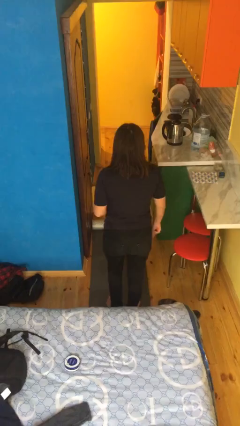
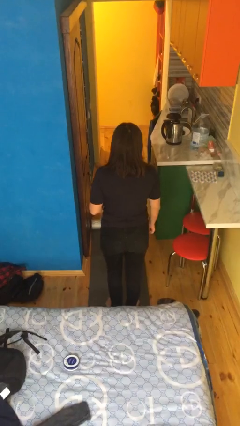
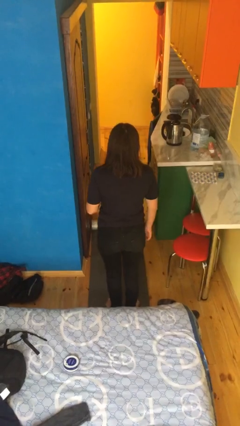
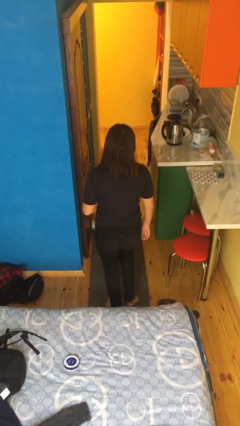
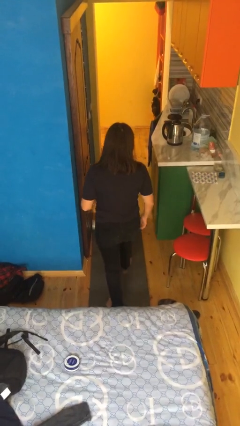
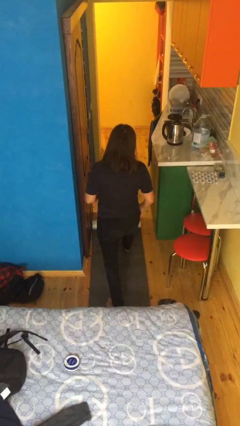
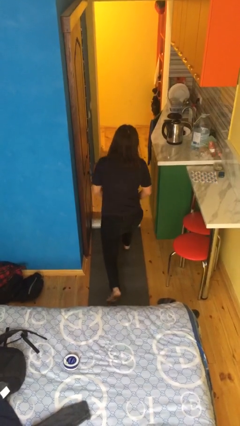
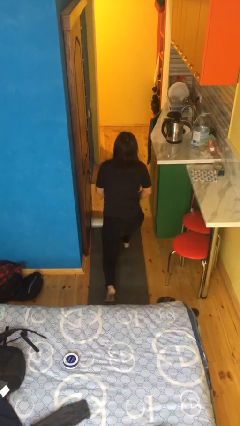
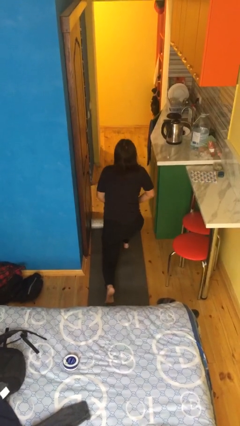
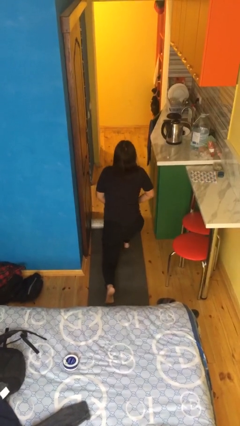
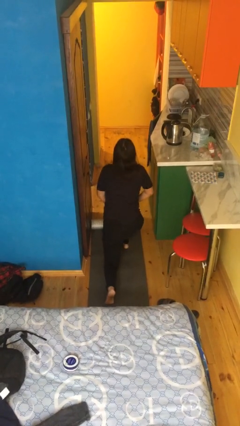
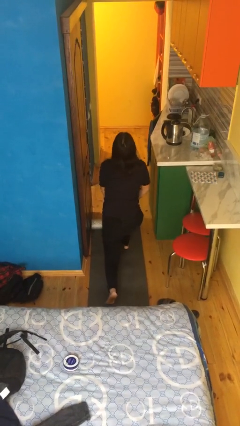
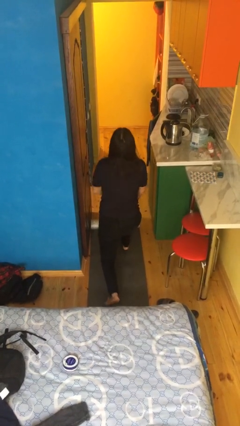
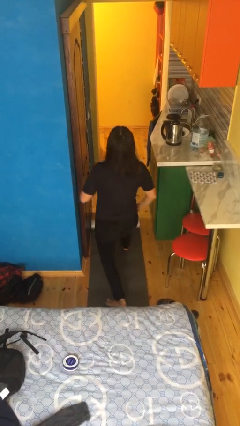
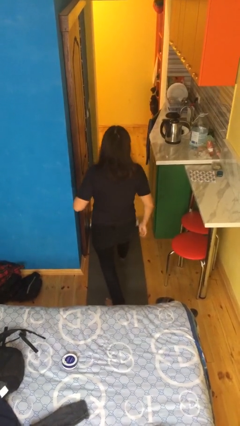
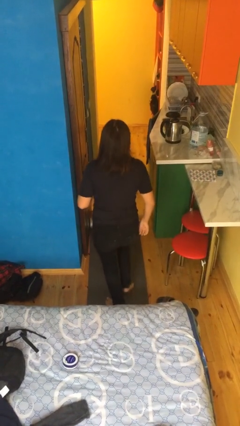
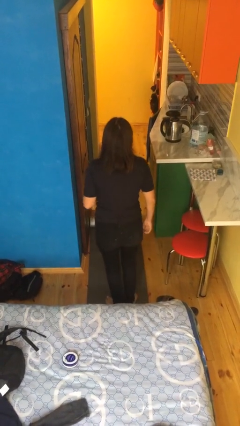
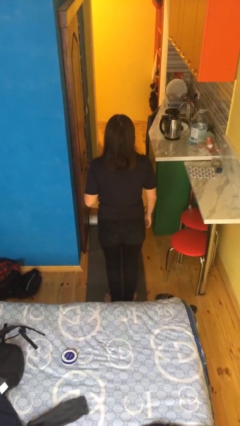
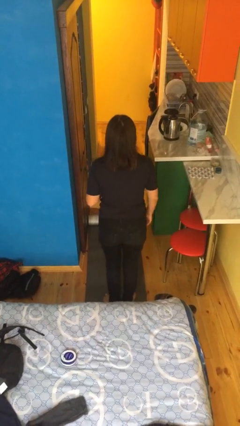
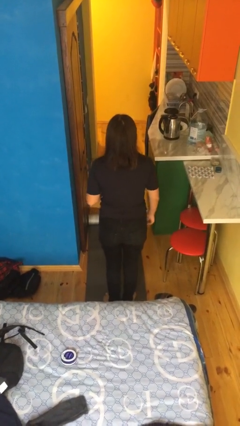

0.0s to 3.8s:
person exercises with lunges

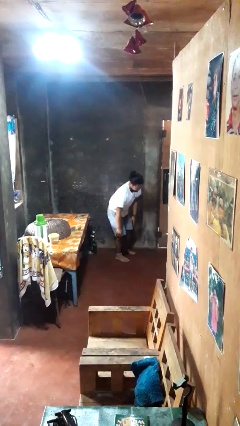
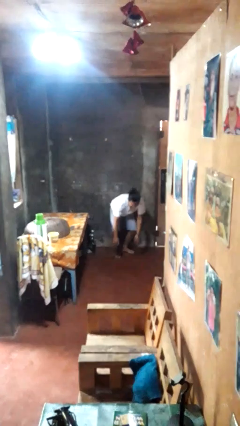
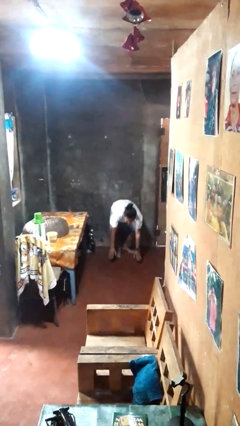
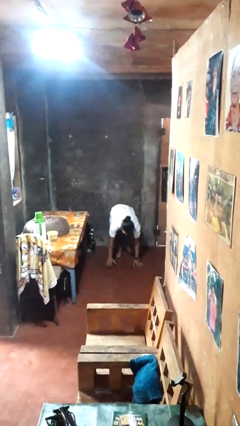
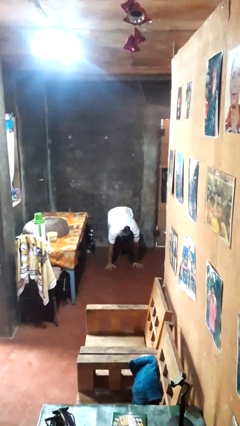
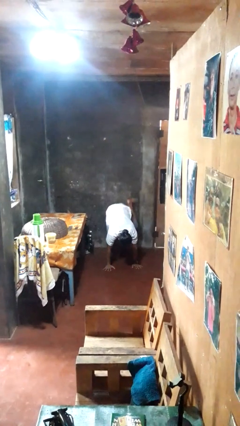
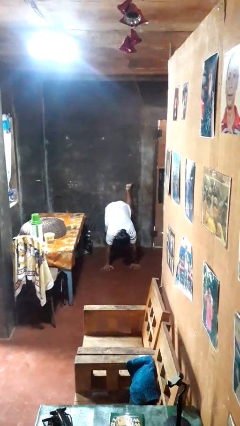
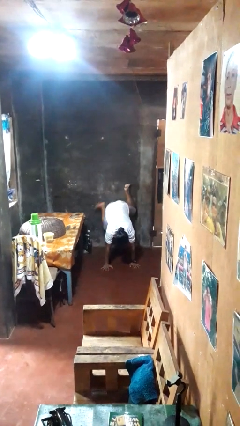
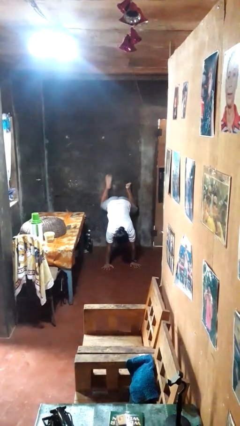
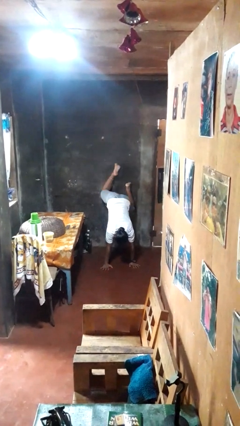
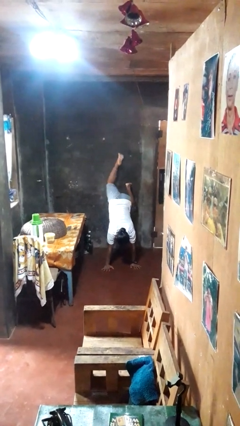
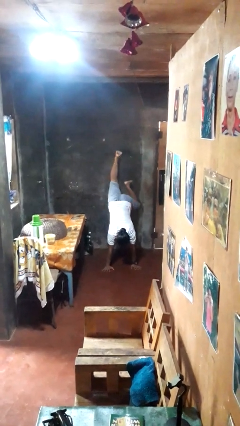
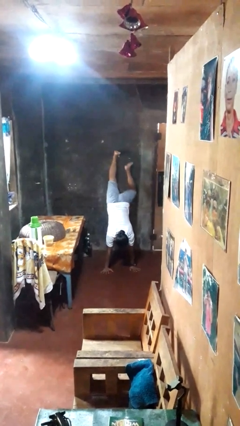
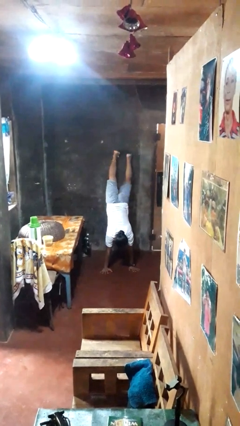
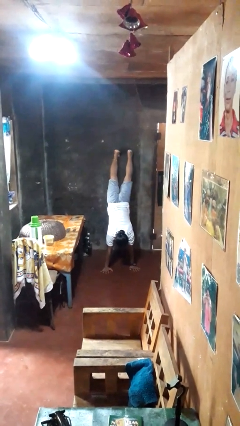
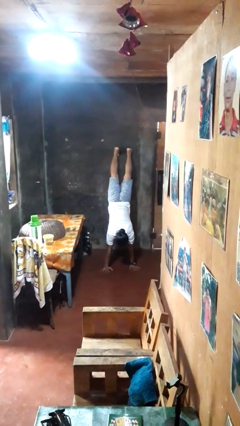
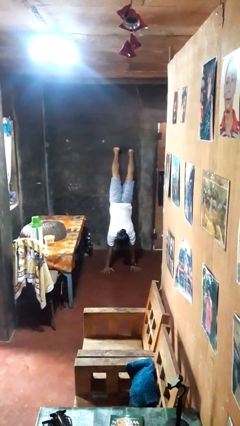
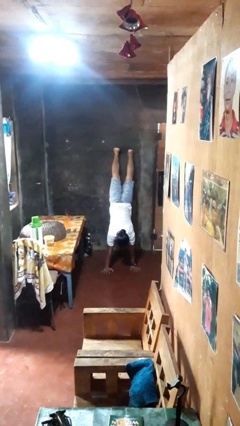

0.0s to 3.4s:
person handstand

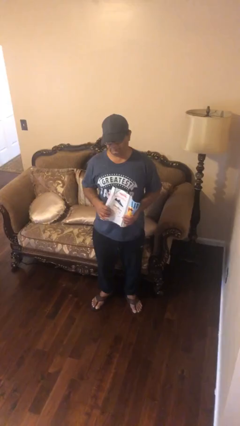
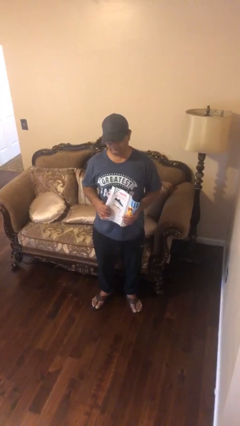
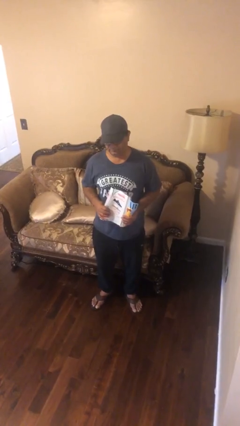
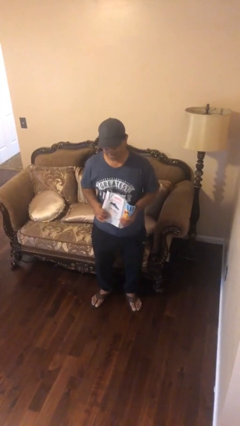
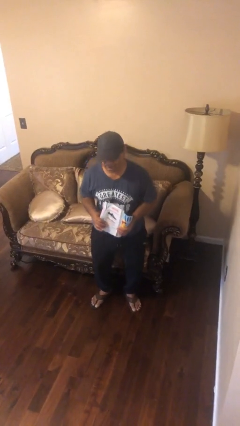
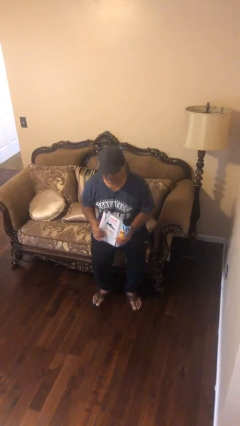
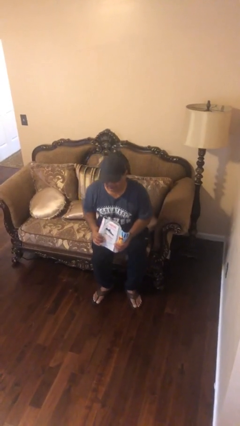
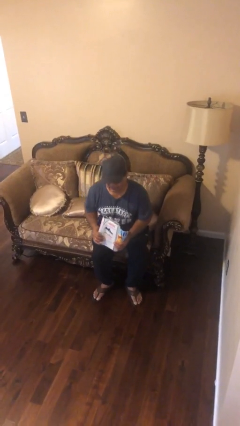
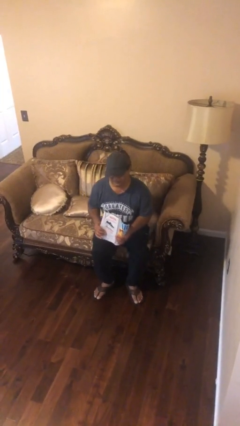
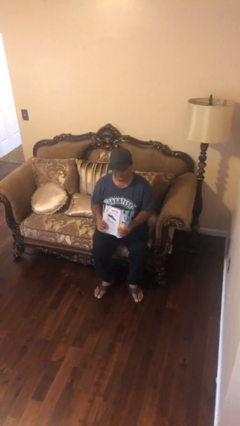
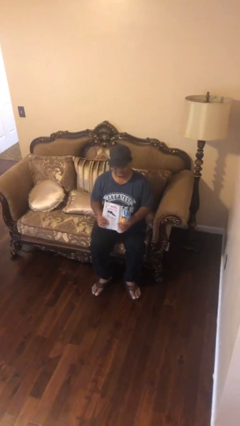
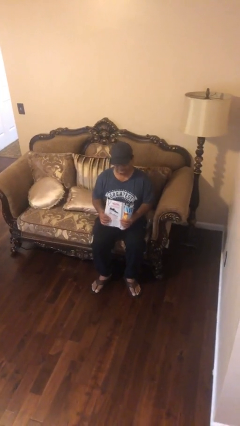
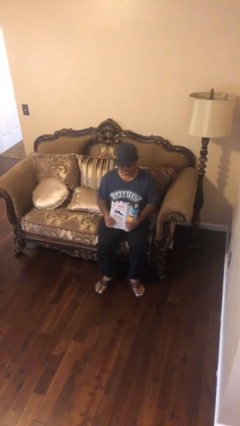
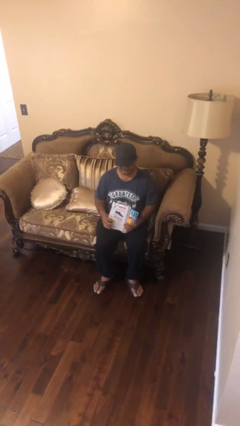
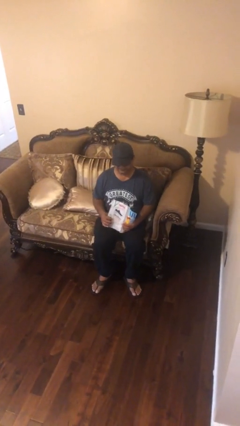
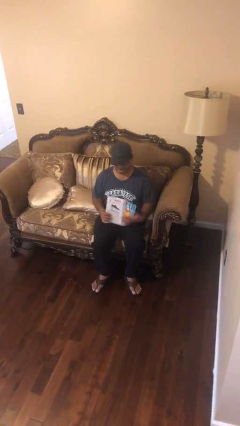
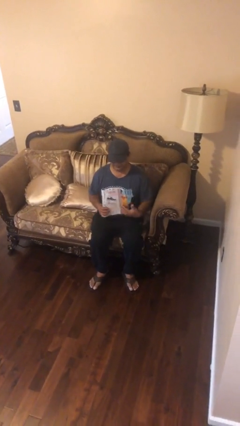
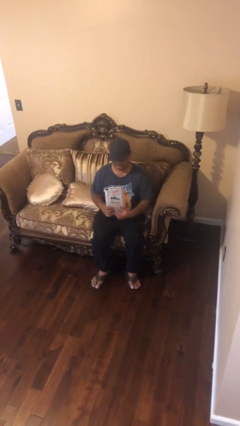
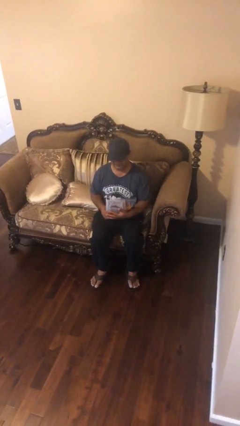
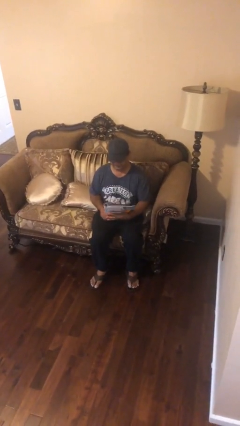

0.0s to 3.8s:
person sits down

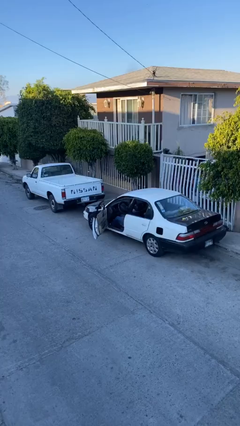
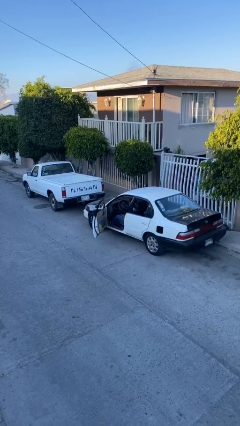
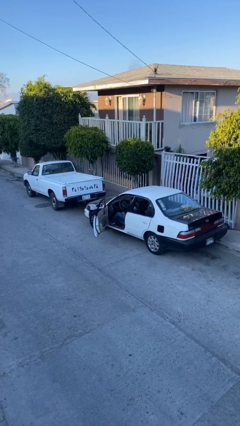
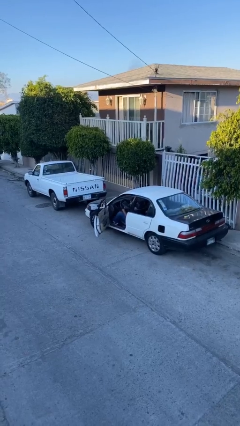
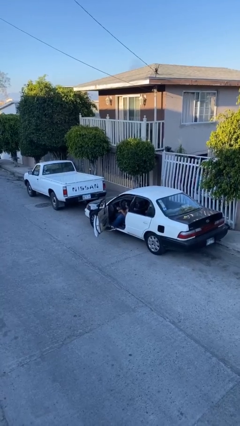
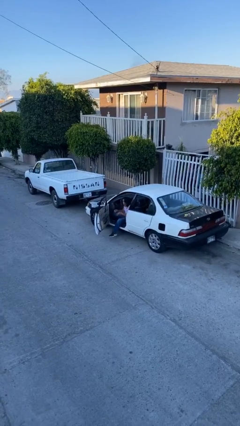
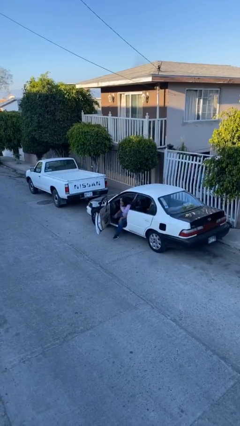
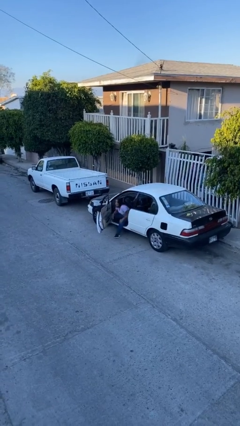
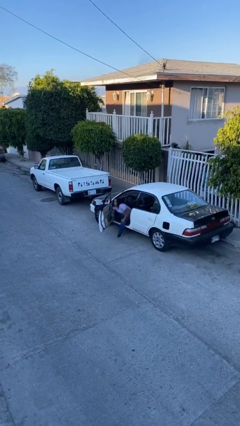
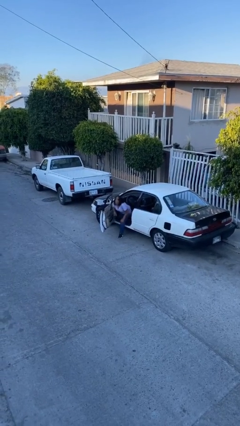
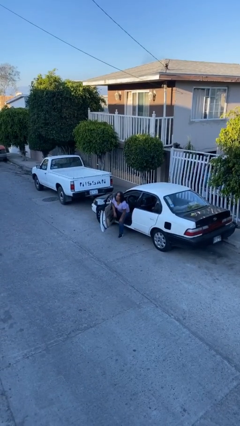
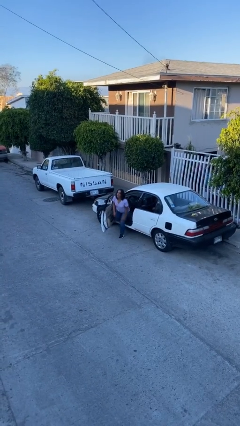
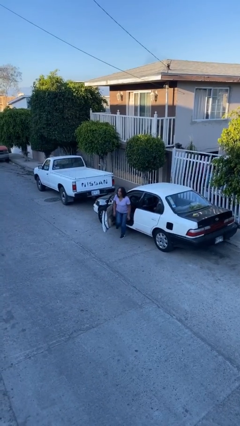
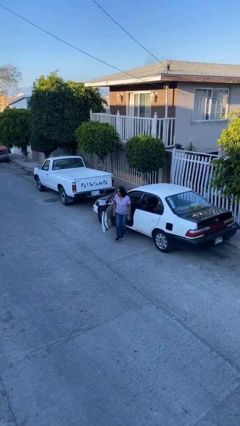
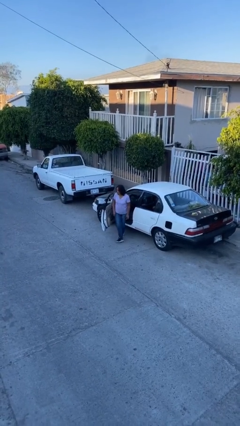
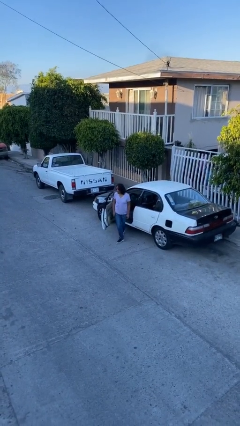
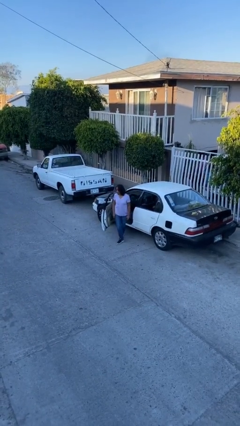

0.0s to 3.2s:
person exits car

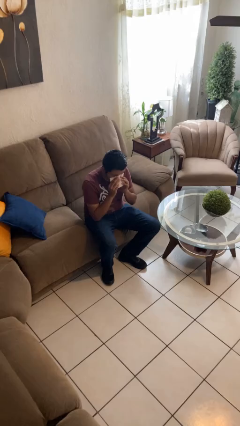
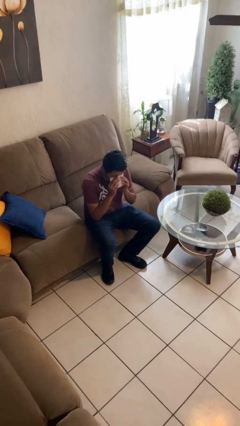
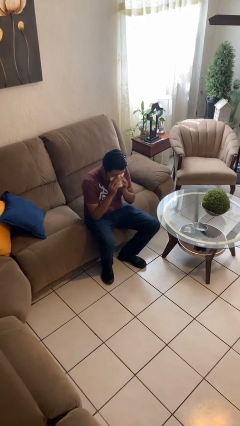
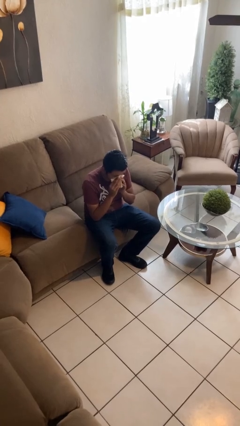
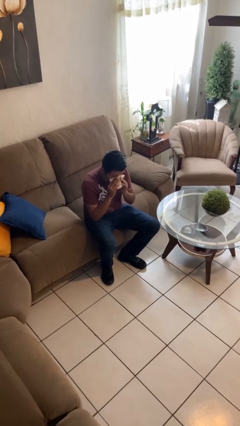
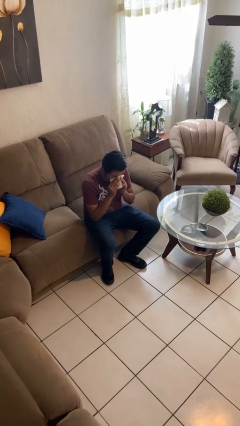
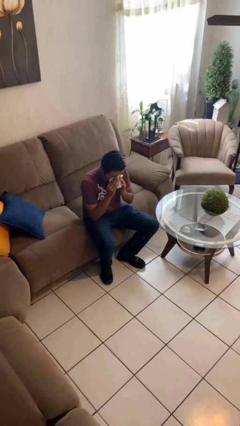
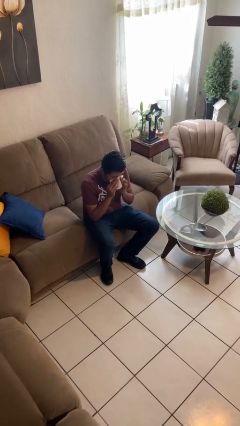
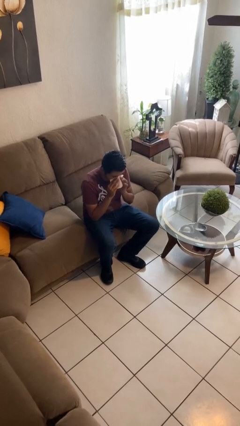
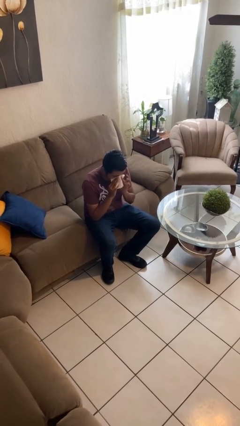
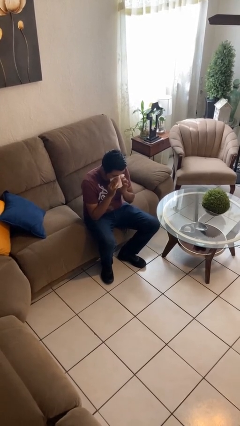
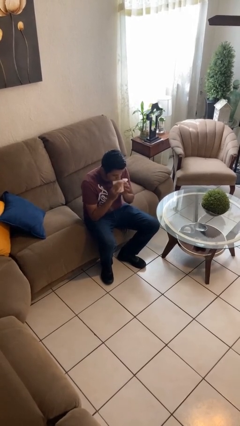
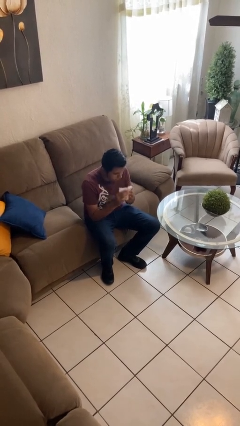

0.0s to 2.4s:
person blows nose

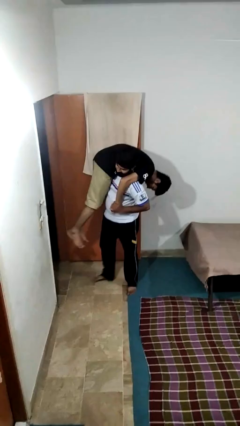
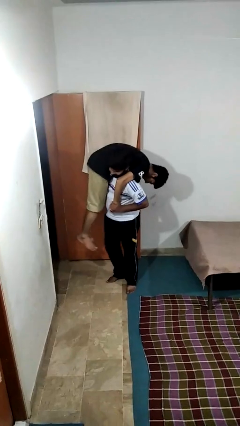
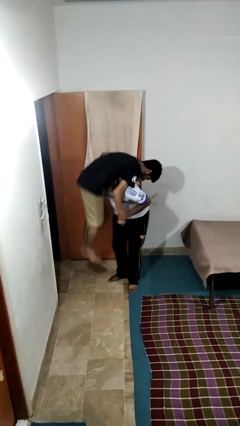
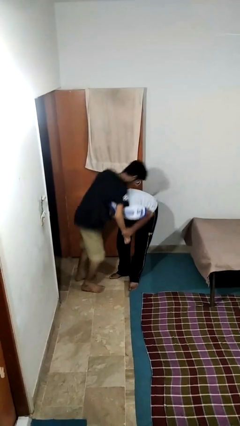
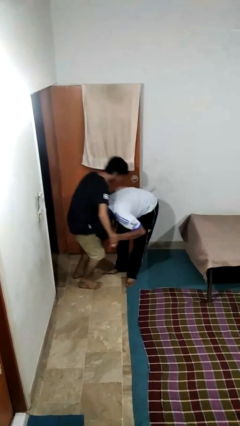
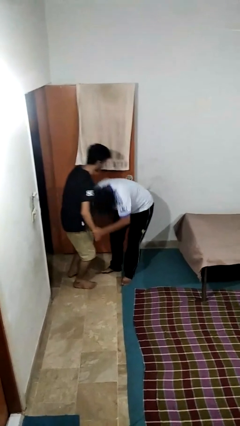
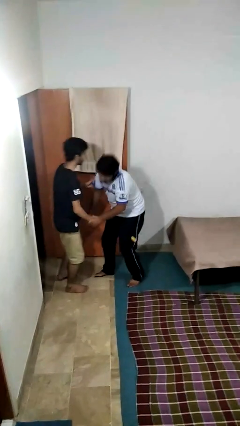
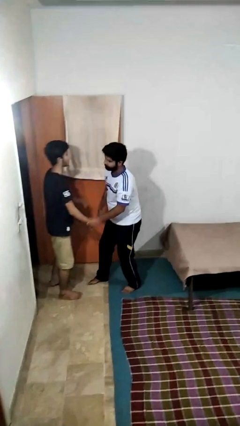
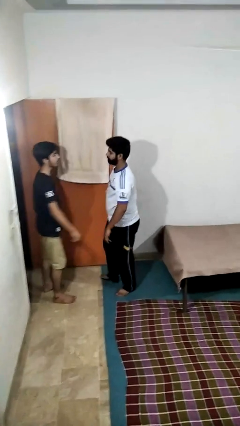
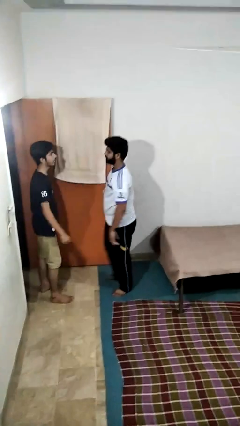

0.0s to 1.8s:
person puts down person
